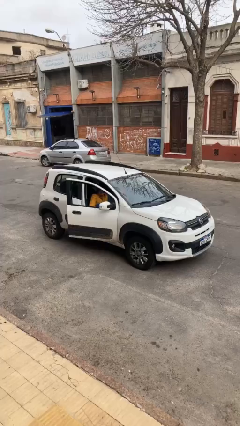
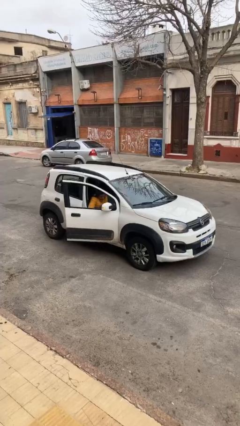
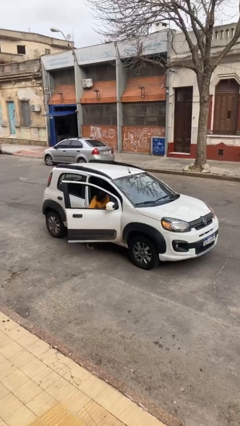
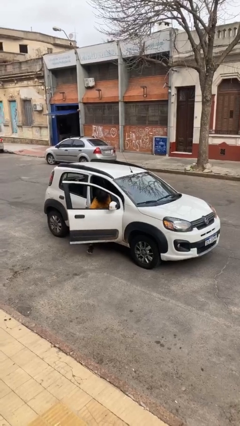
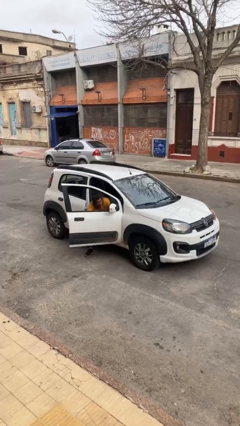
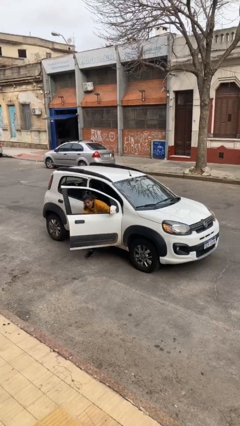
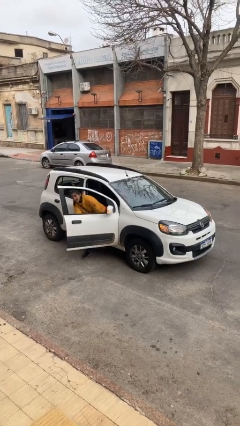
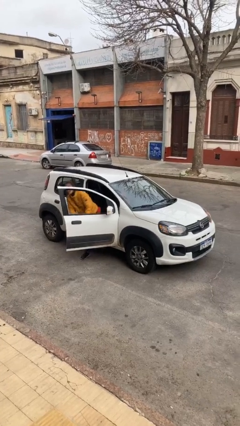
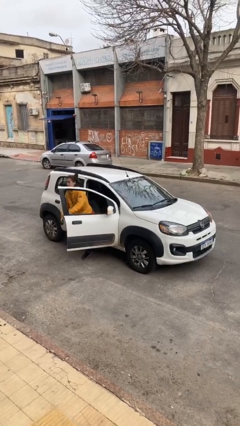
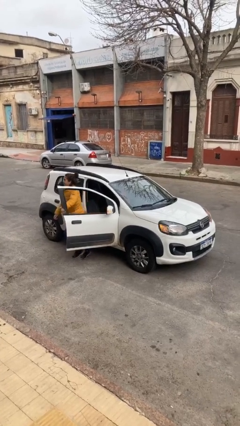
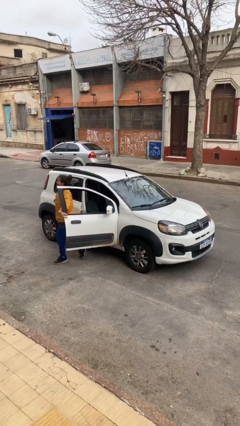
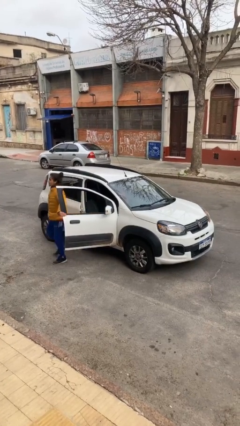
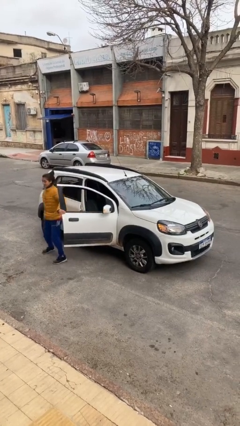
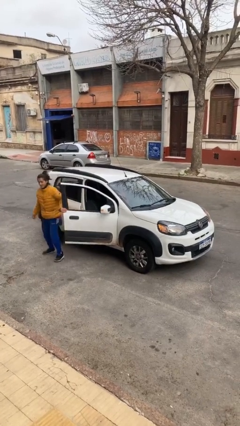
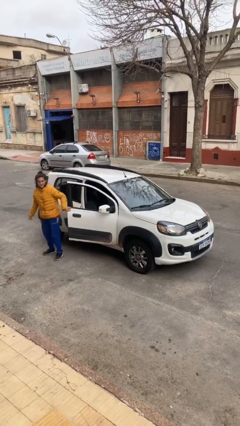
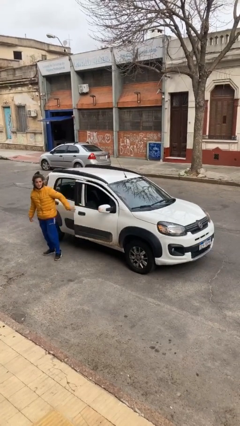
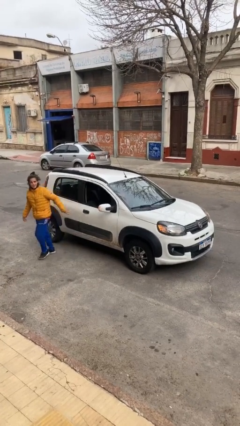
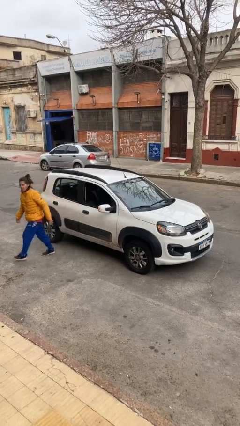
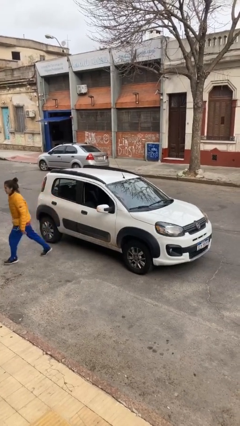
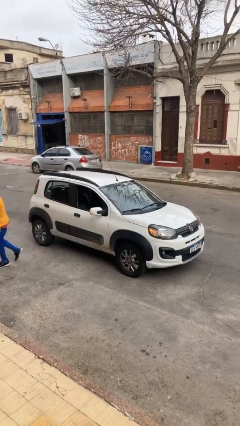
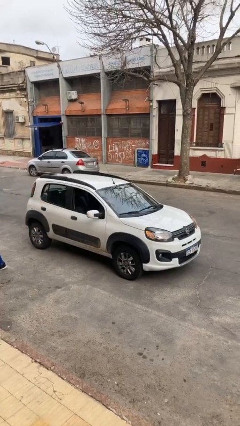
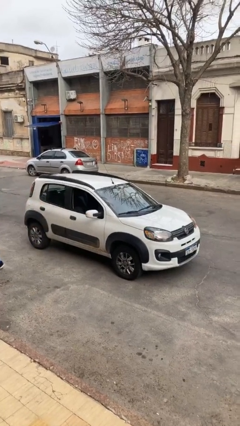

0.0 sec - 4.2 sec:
car drops off person

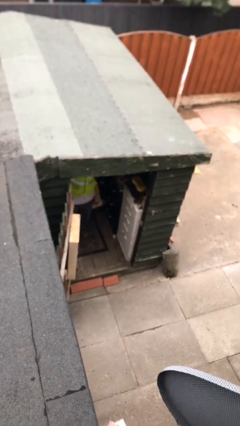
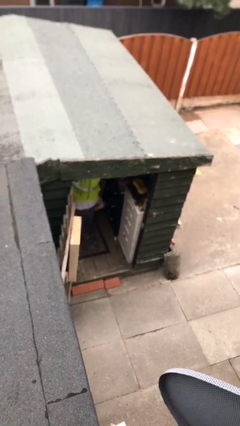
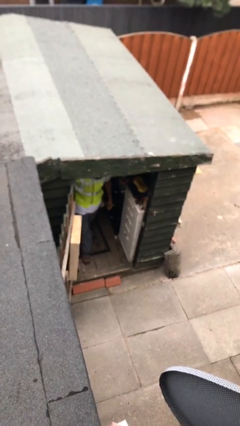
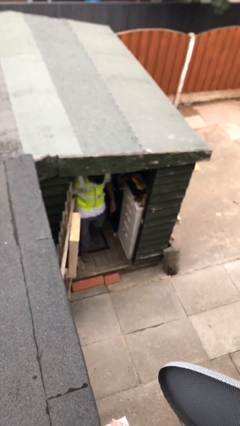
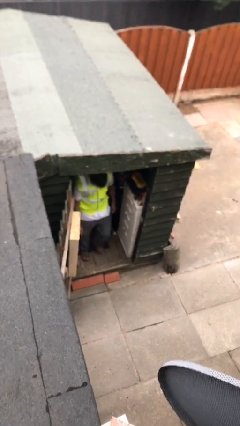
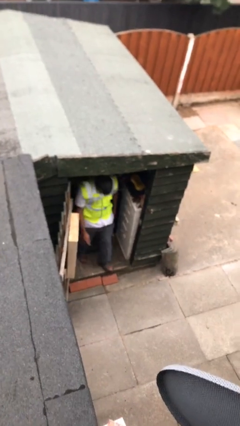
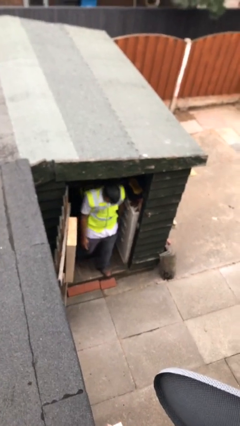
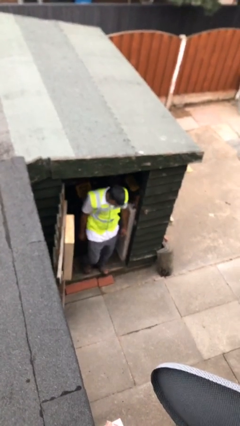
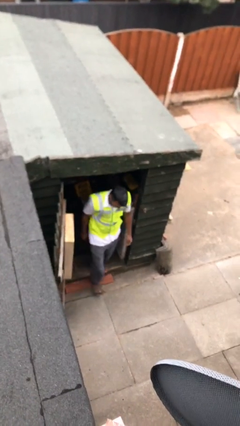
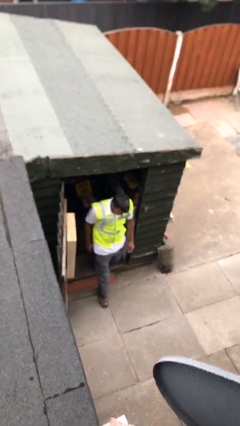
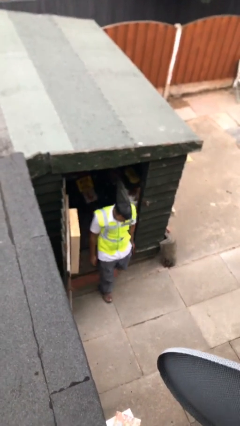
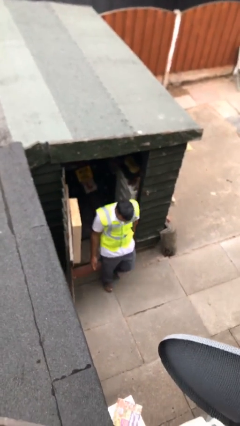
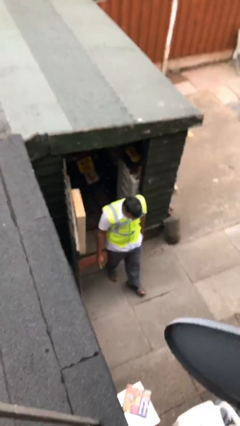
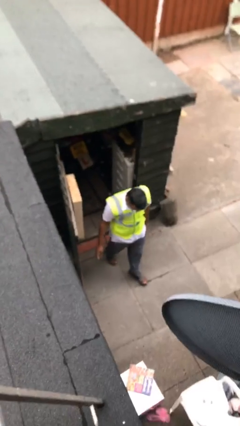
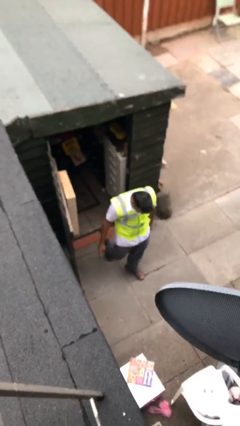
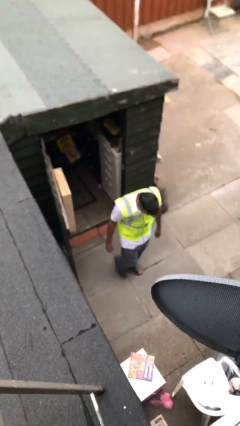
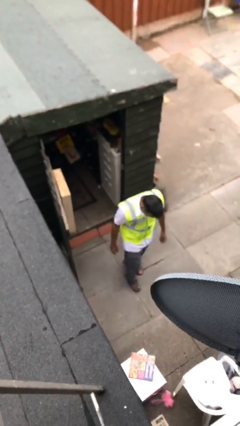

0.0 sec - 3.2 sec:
person enters scene through structure

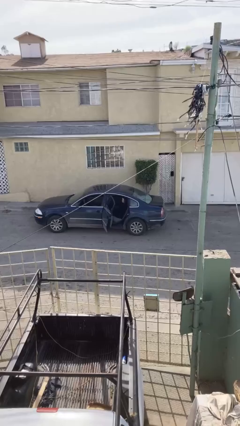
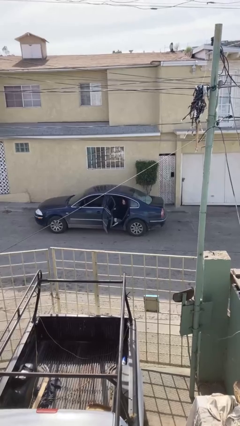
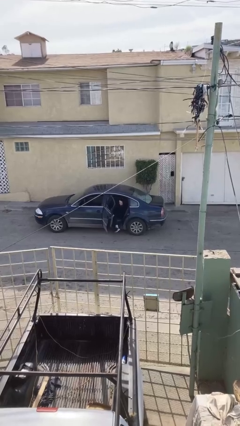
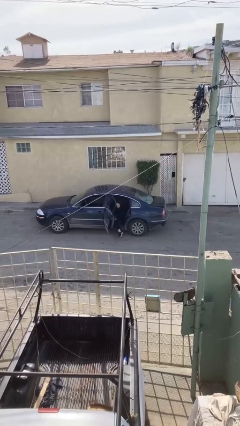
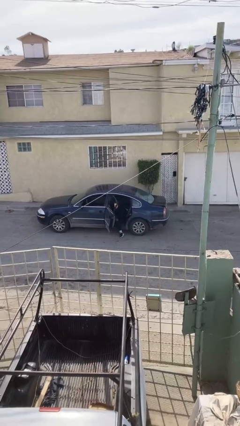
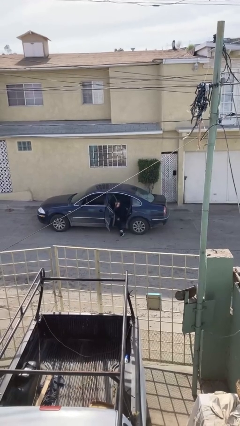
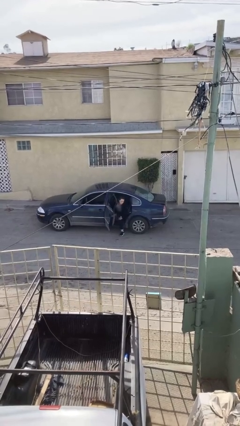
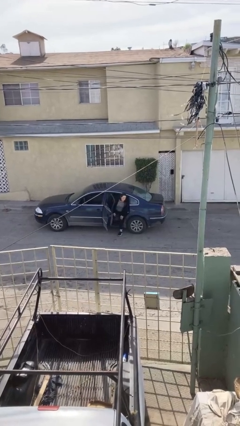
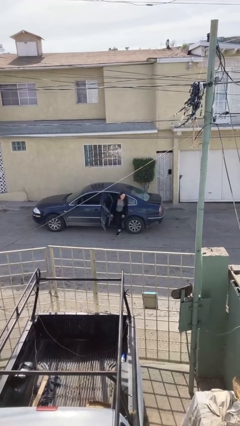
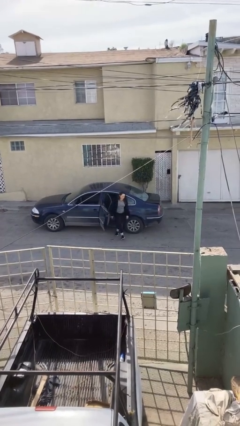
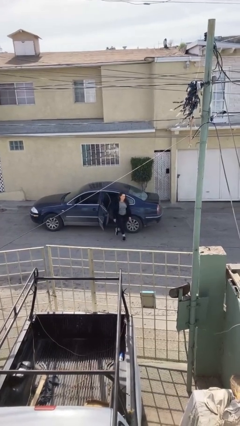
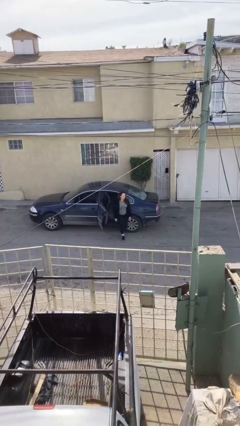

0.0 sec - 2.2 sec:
person exits car

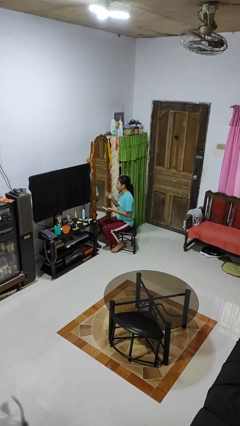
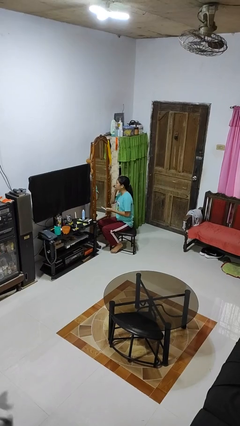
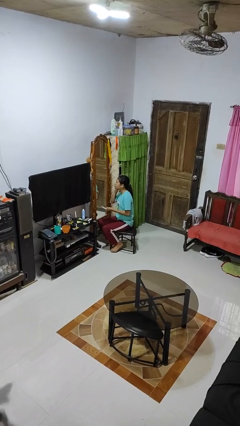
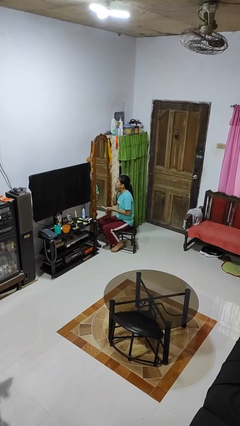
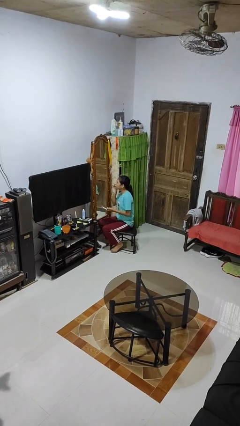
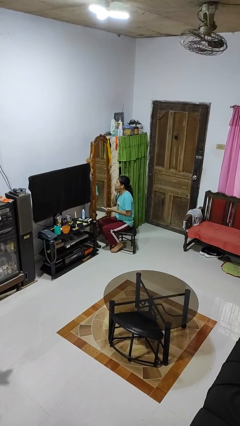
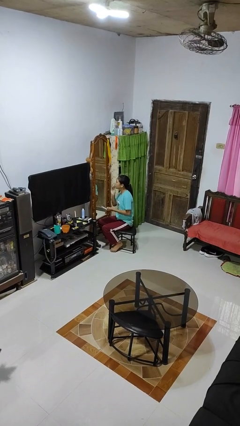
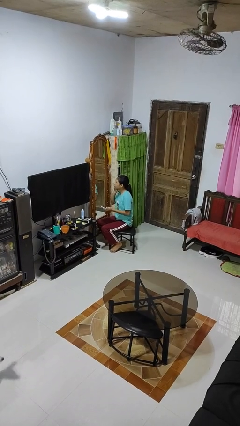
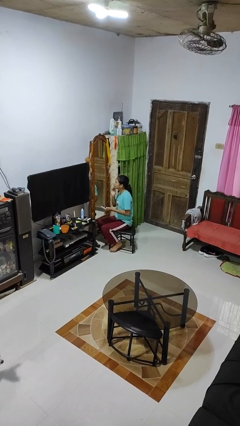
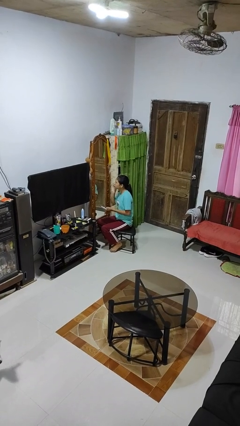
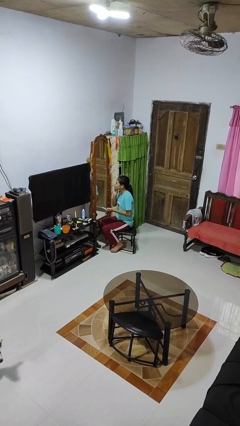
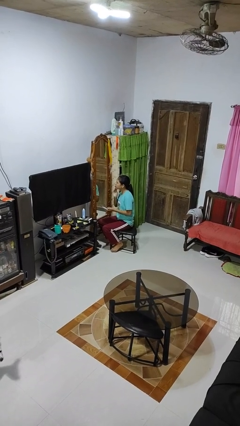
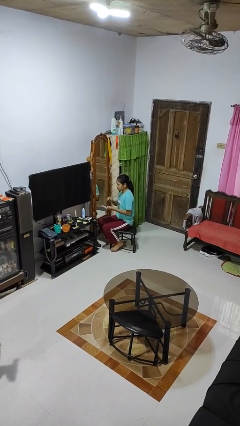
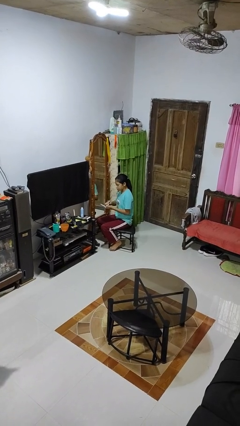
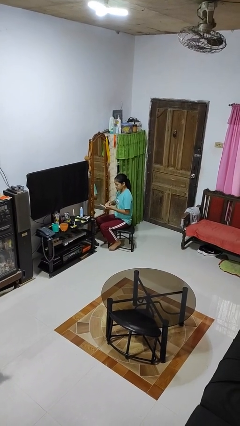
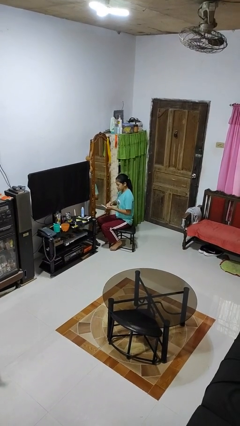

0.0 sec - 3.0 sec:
person applies foundation makeup

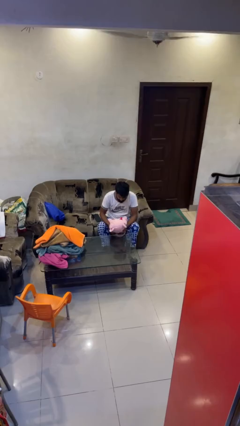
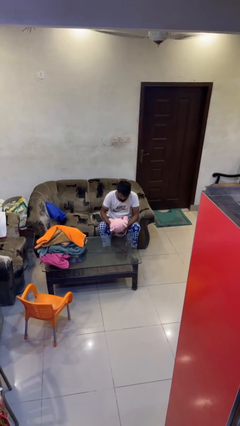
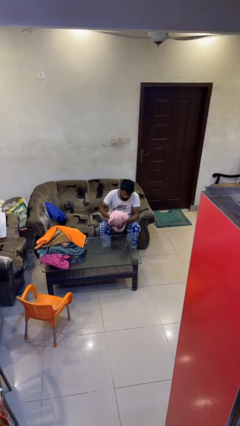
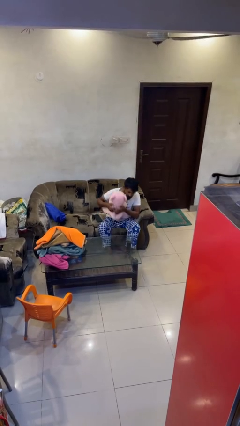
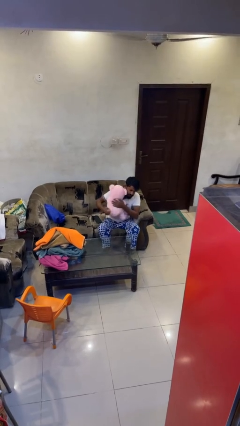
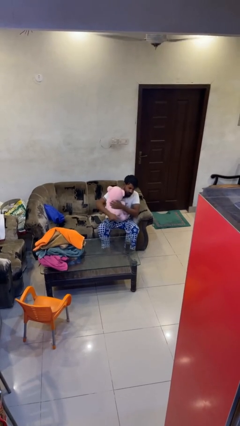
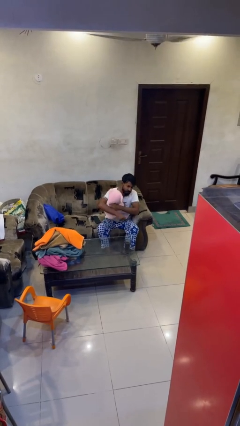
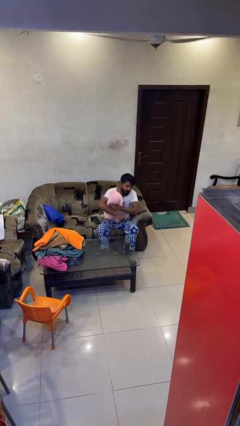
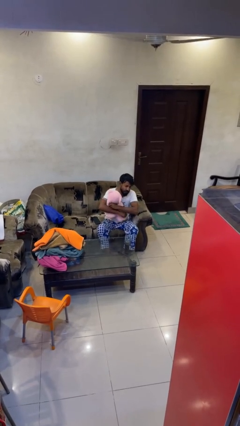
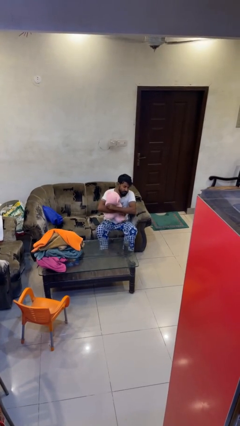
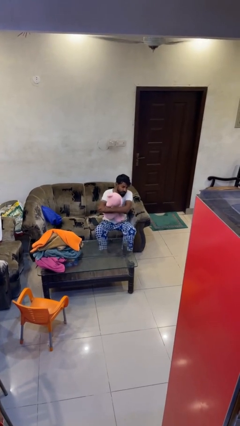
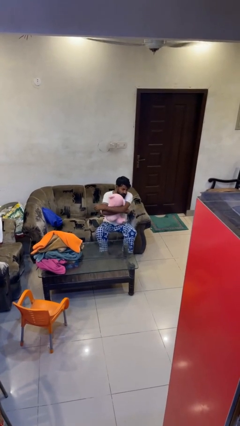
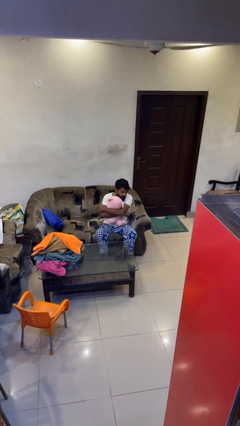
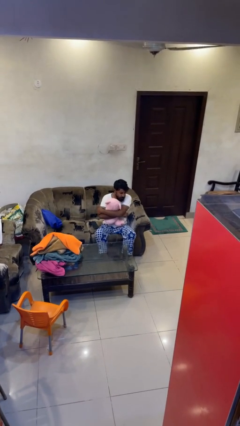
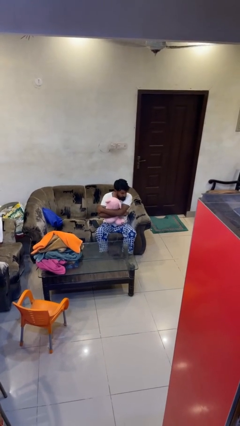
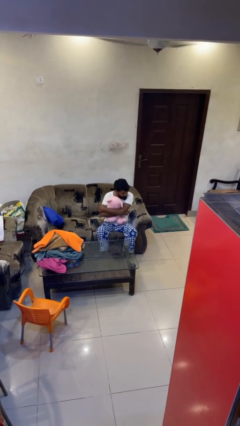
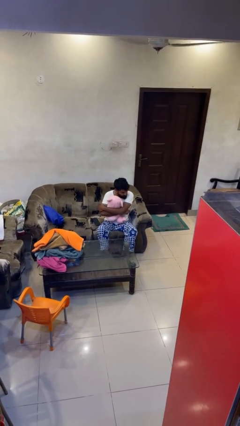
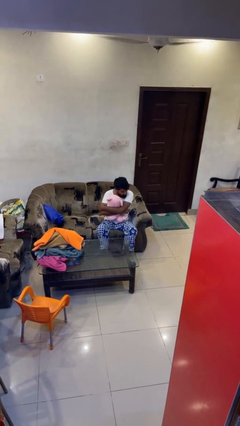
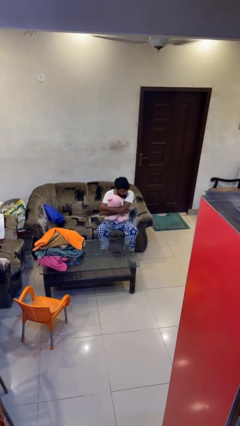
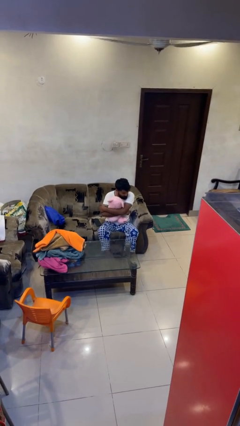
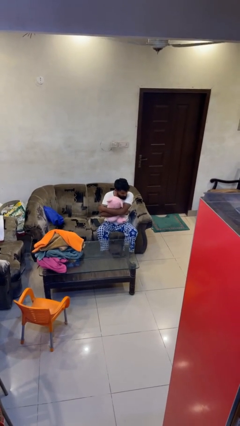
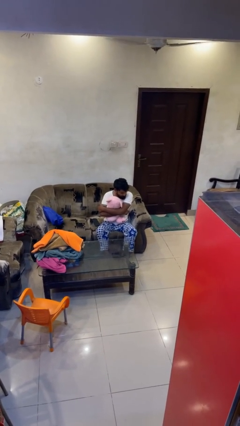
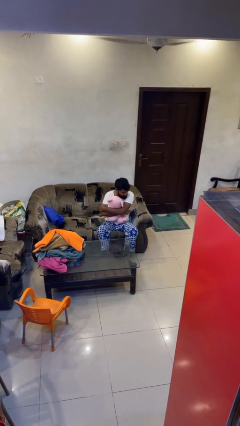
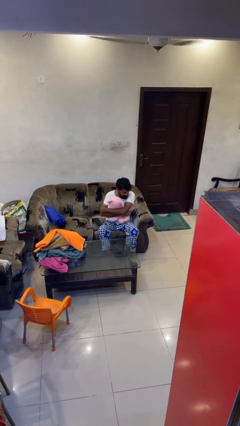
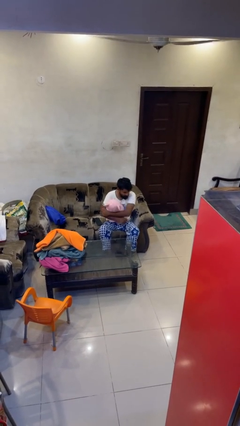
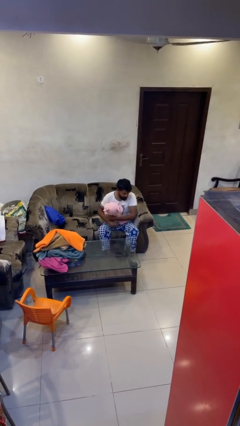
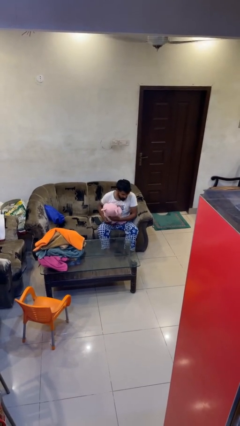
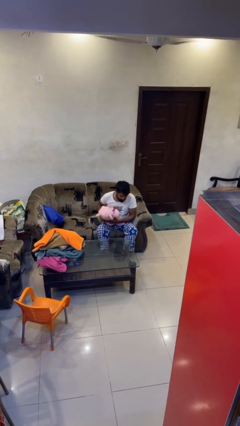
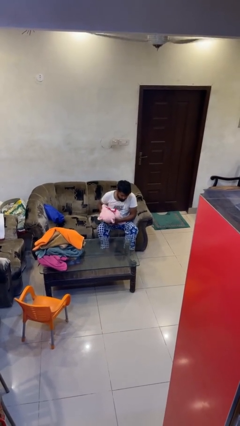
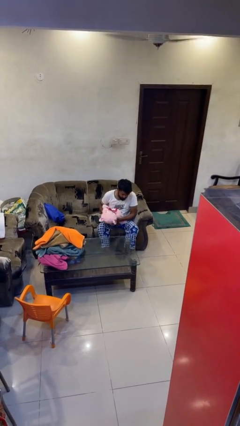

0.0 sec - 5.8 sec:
person hugs stuffed animal
